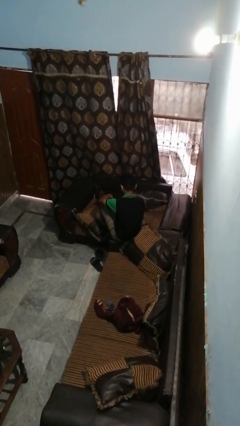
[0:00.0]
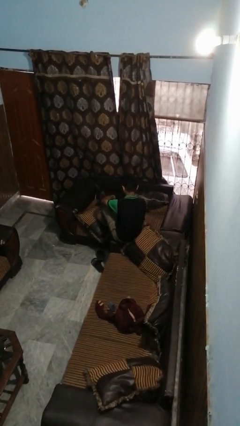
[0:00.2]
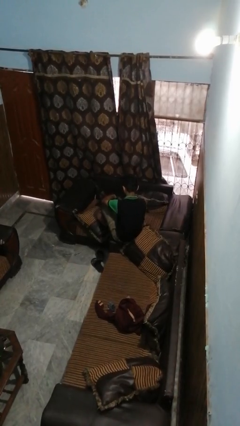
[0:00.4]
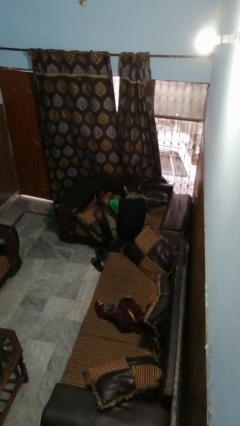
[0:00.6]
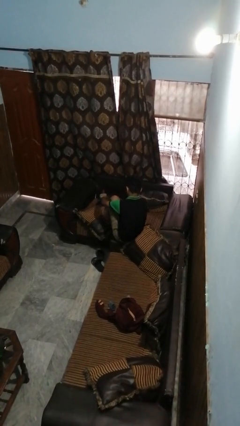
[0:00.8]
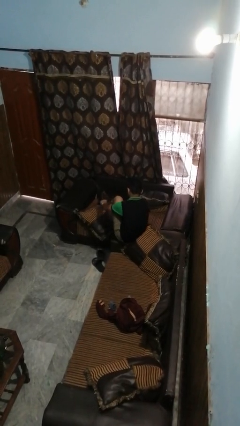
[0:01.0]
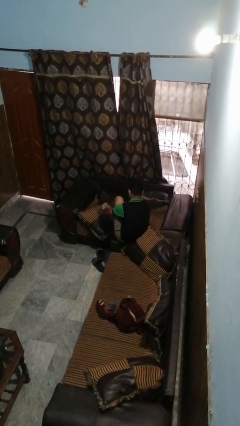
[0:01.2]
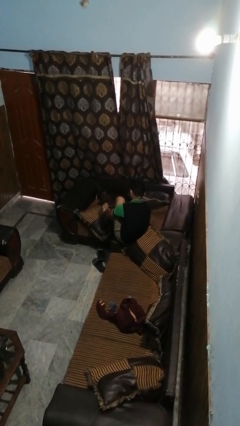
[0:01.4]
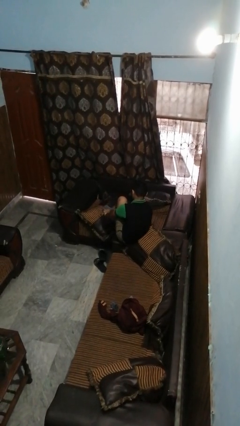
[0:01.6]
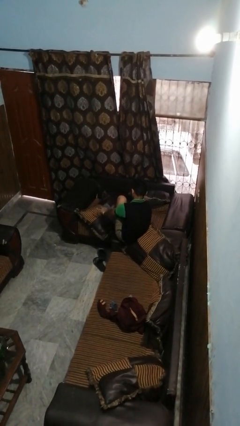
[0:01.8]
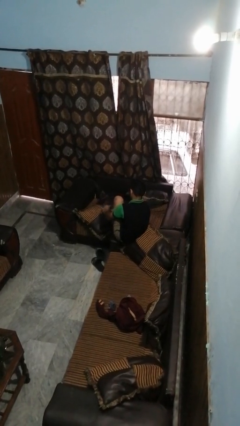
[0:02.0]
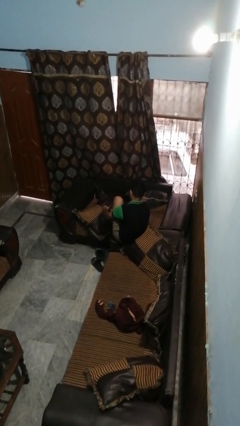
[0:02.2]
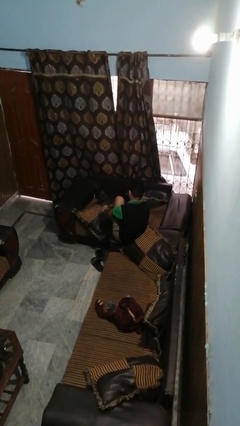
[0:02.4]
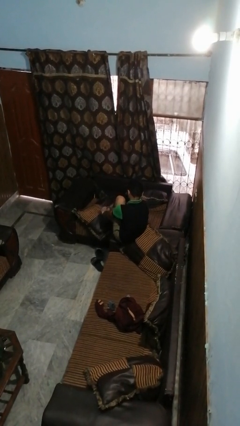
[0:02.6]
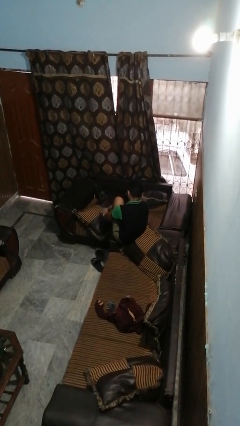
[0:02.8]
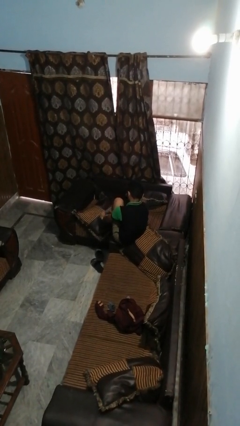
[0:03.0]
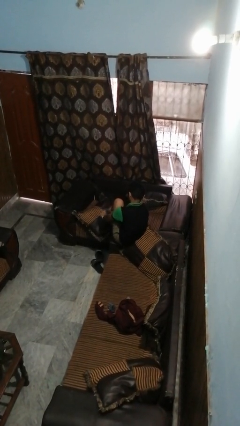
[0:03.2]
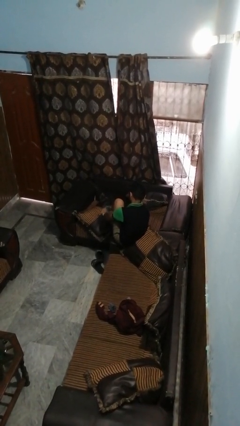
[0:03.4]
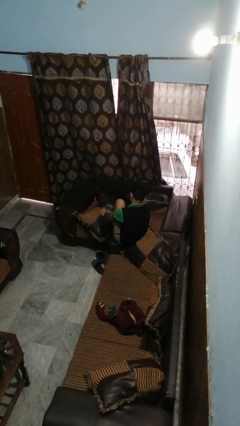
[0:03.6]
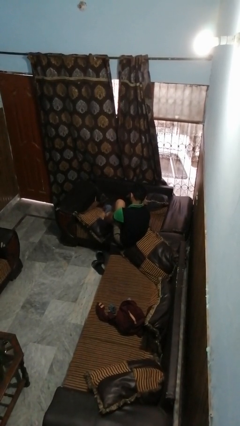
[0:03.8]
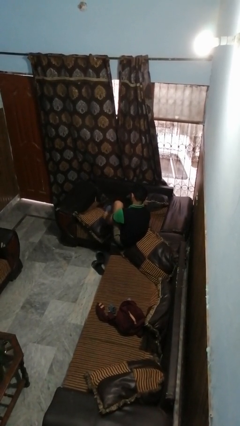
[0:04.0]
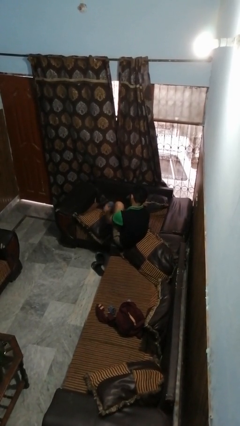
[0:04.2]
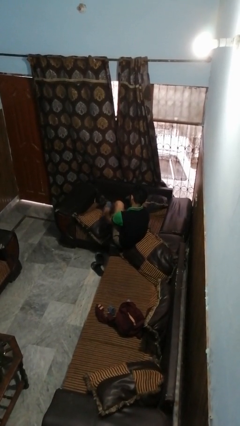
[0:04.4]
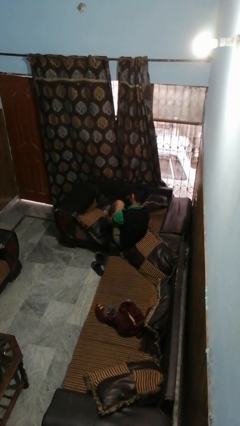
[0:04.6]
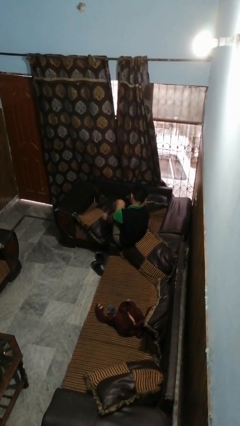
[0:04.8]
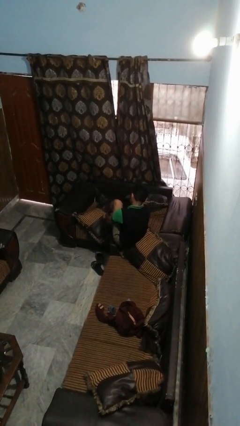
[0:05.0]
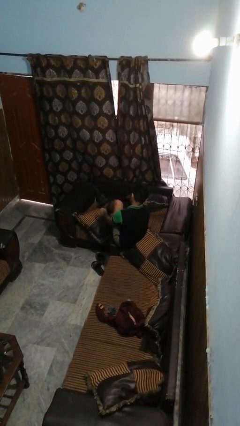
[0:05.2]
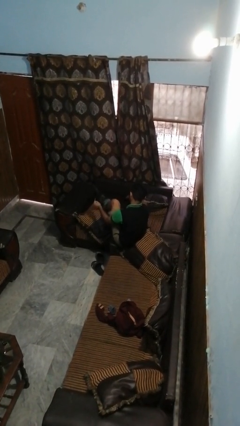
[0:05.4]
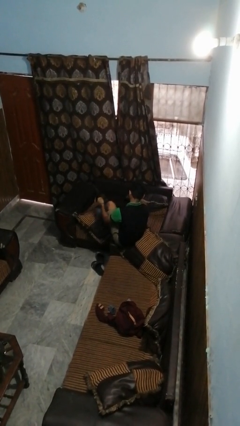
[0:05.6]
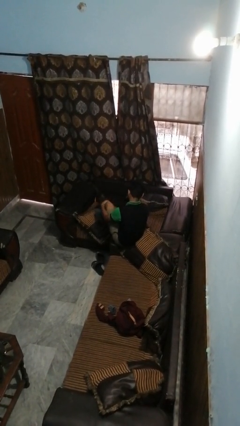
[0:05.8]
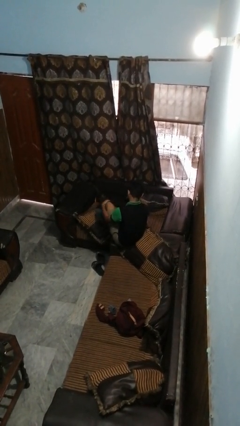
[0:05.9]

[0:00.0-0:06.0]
person puts on socks

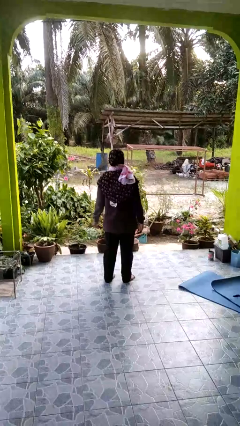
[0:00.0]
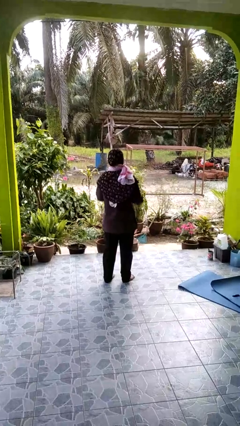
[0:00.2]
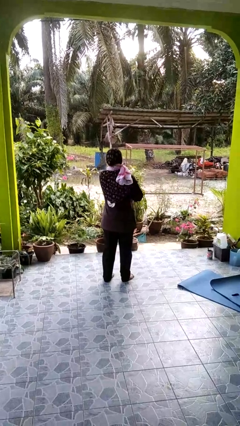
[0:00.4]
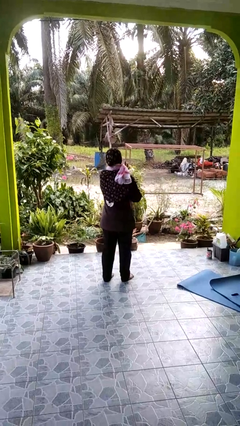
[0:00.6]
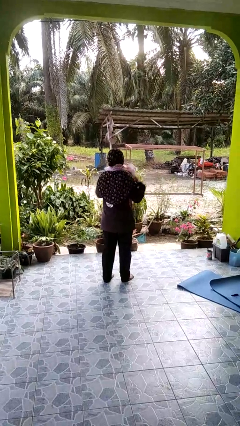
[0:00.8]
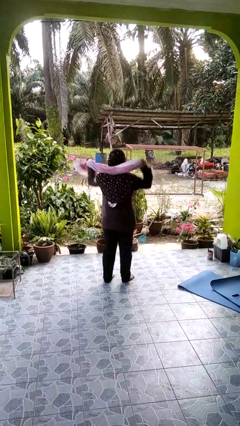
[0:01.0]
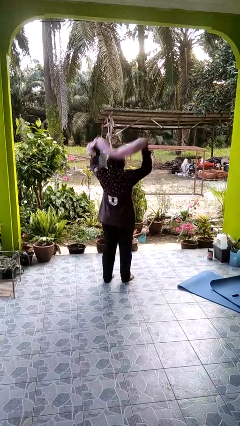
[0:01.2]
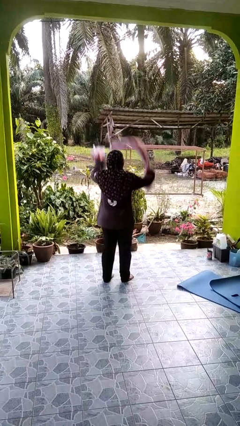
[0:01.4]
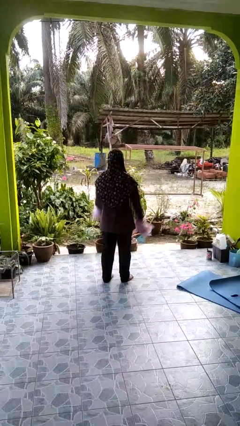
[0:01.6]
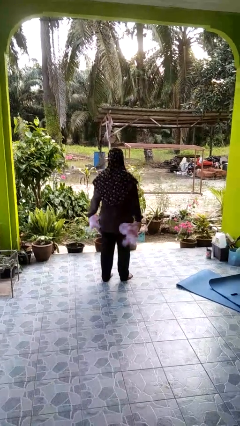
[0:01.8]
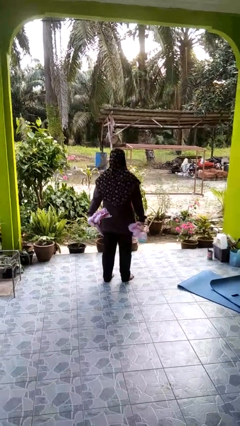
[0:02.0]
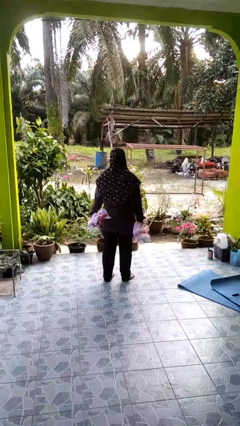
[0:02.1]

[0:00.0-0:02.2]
person takes off scarf

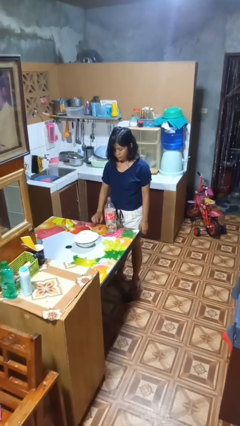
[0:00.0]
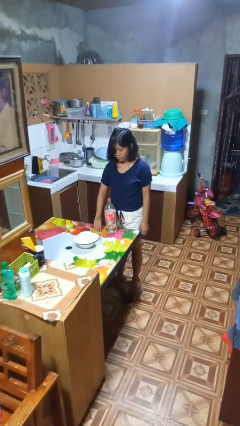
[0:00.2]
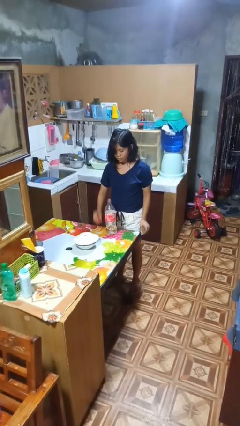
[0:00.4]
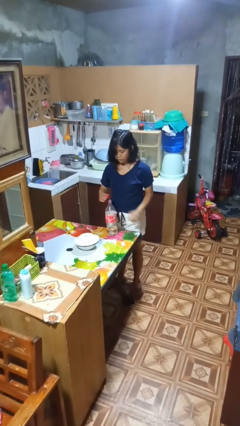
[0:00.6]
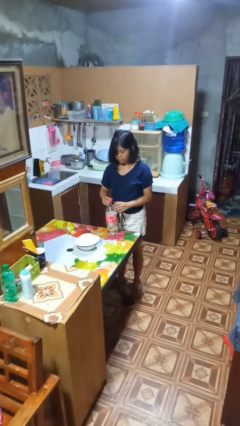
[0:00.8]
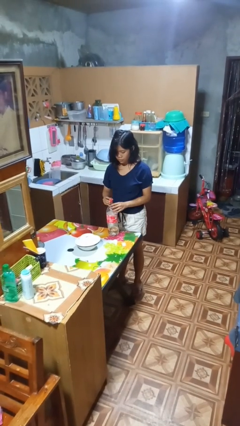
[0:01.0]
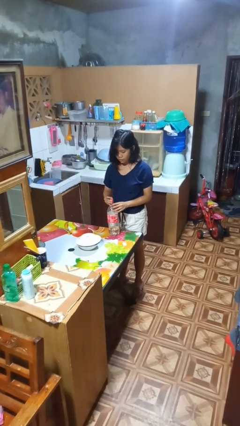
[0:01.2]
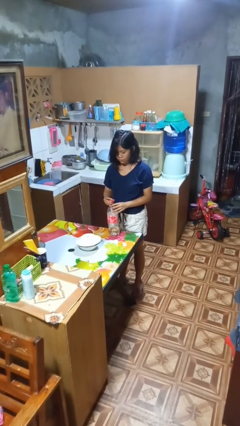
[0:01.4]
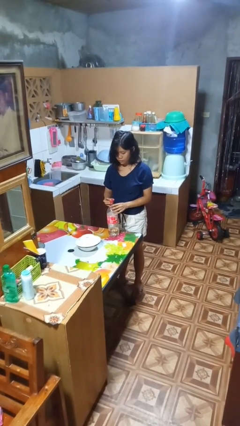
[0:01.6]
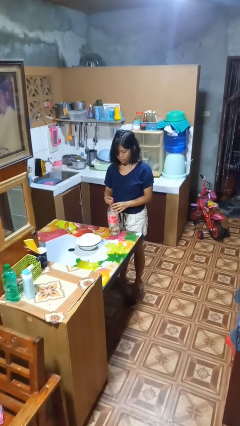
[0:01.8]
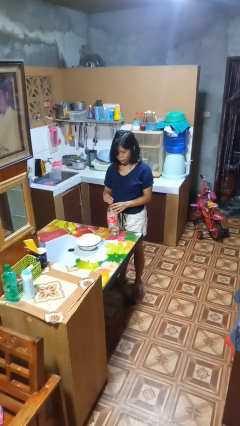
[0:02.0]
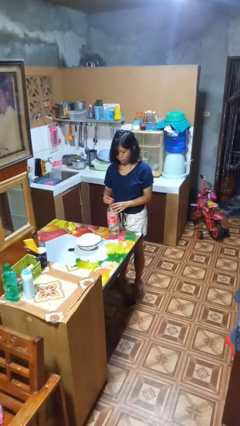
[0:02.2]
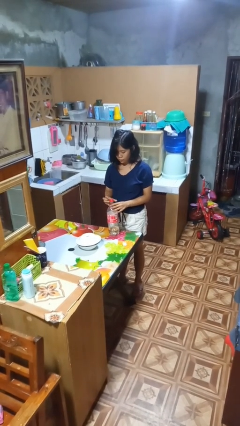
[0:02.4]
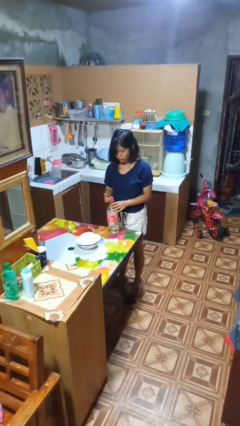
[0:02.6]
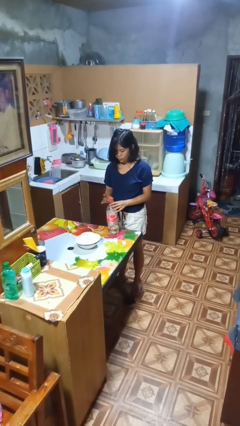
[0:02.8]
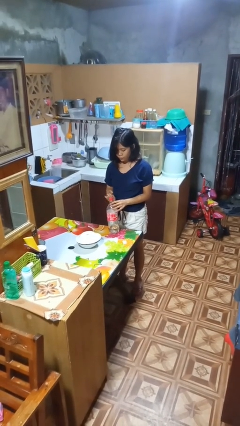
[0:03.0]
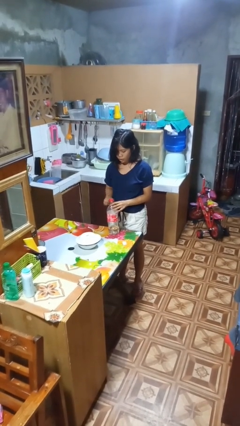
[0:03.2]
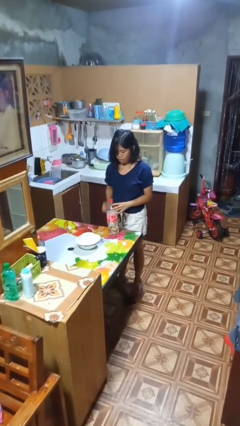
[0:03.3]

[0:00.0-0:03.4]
person screws lid to bottle

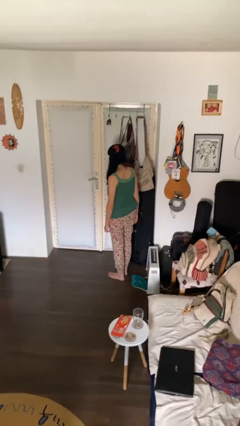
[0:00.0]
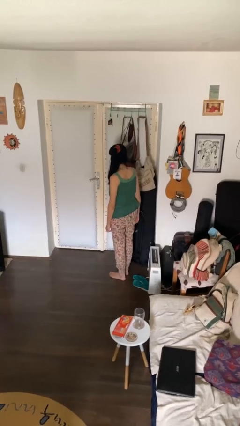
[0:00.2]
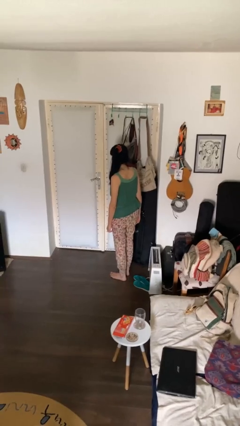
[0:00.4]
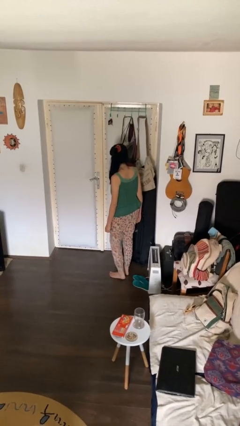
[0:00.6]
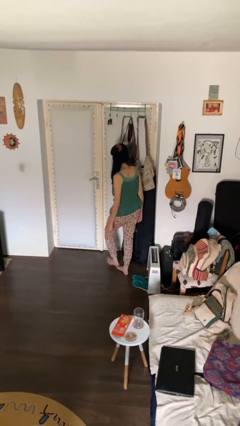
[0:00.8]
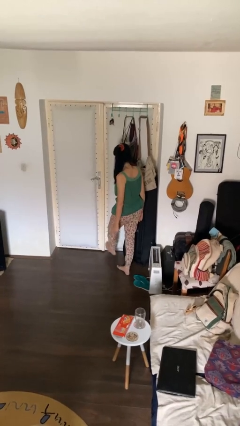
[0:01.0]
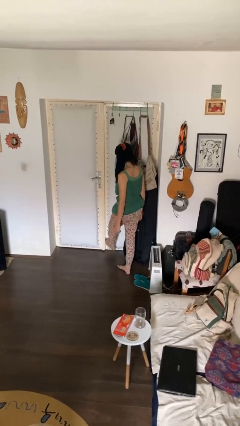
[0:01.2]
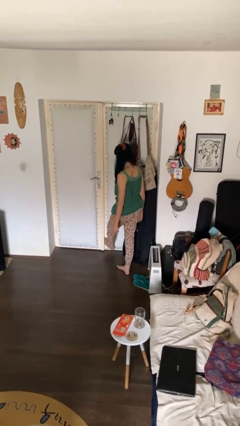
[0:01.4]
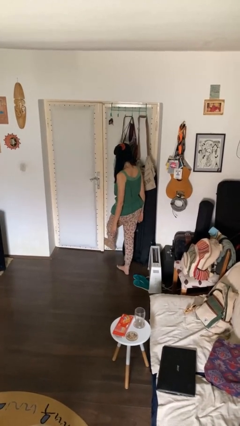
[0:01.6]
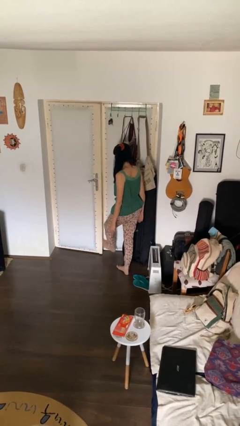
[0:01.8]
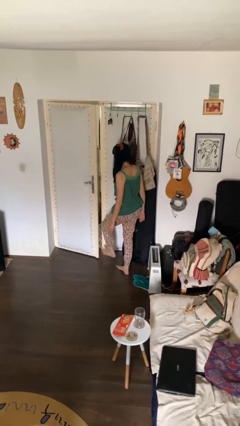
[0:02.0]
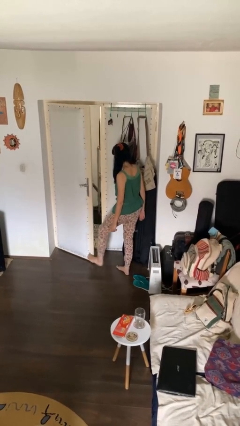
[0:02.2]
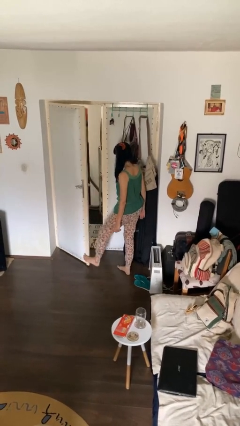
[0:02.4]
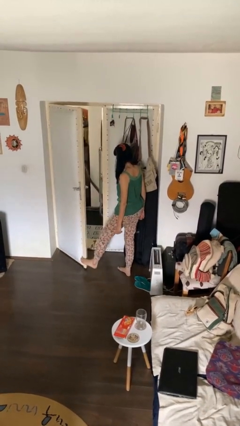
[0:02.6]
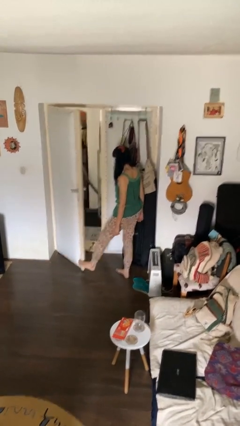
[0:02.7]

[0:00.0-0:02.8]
person opens facility door

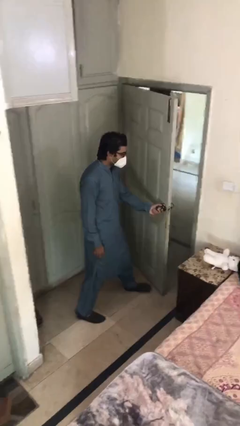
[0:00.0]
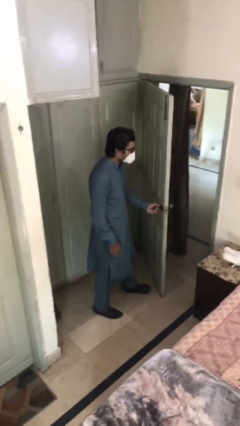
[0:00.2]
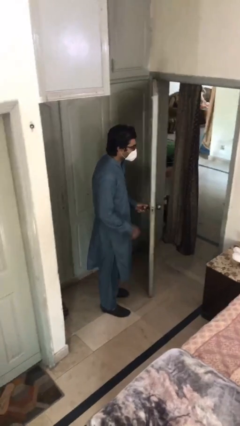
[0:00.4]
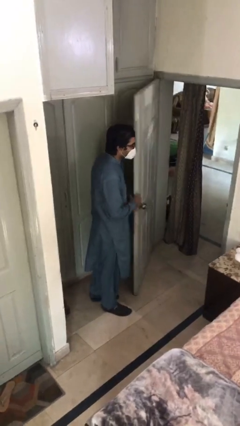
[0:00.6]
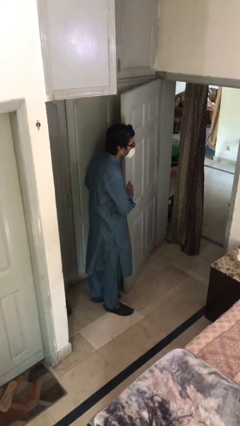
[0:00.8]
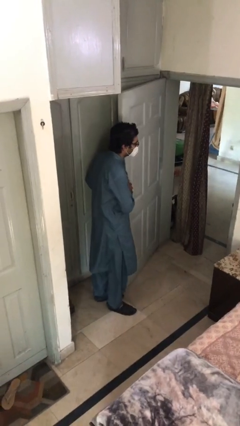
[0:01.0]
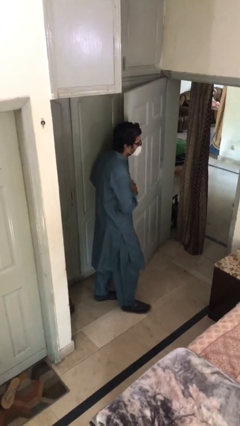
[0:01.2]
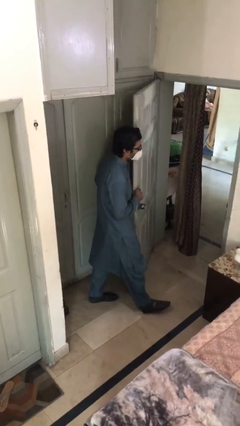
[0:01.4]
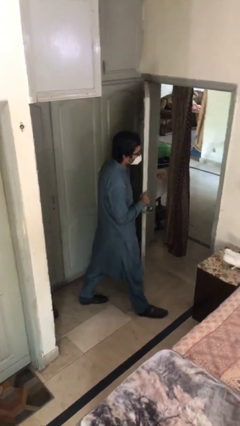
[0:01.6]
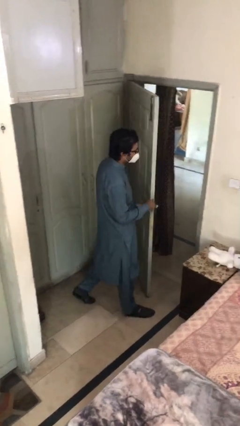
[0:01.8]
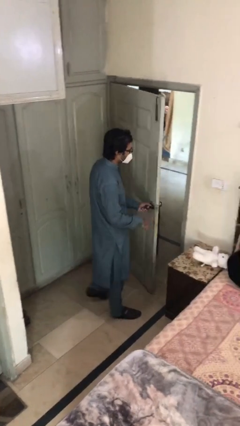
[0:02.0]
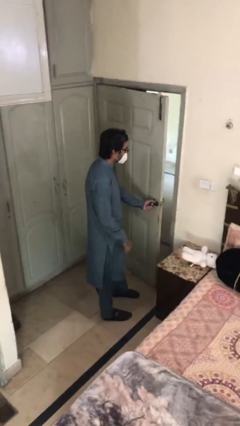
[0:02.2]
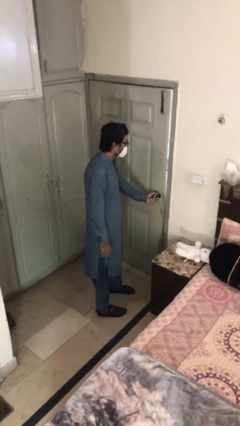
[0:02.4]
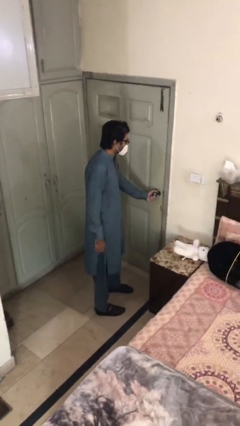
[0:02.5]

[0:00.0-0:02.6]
person closes facility door

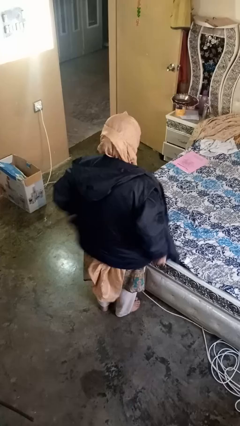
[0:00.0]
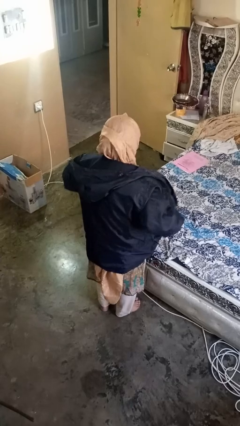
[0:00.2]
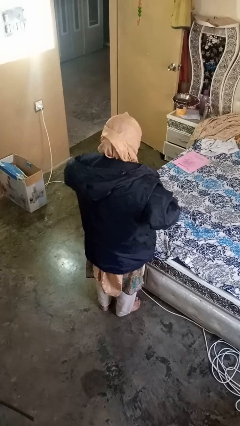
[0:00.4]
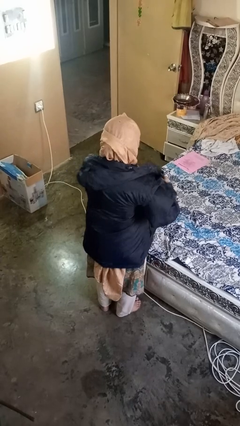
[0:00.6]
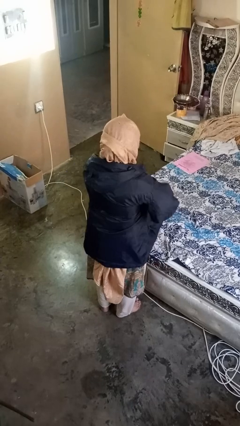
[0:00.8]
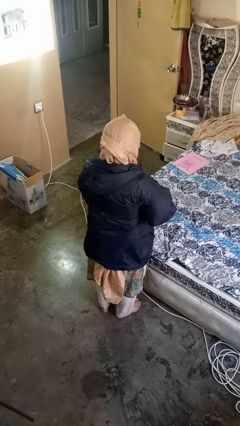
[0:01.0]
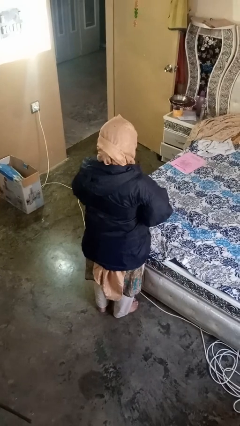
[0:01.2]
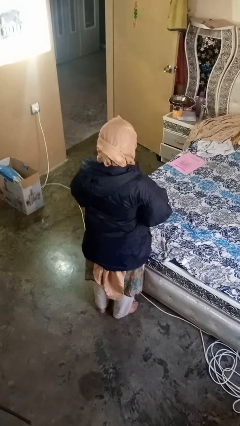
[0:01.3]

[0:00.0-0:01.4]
person zips up jacket
